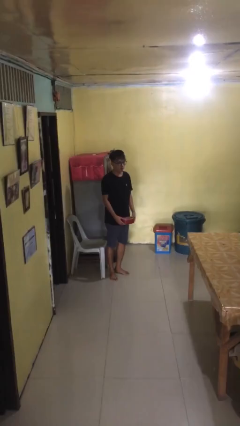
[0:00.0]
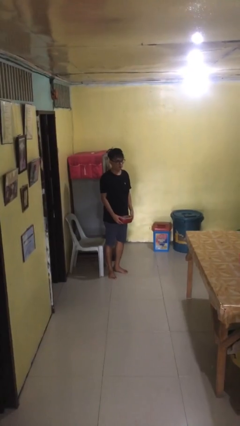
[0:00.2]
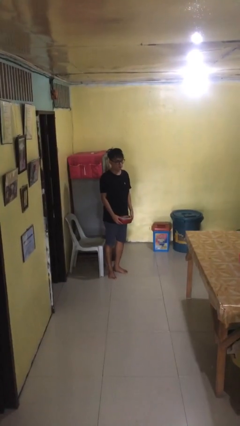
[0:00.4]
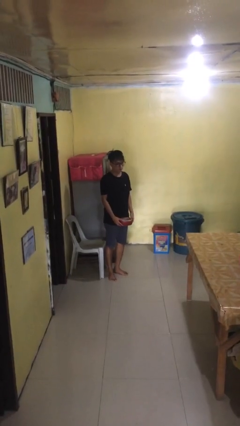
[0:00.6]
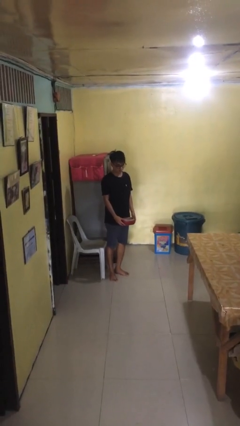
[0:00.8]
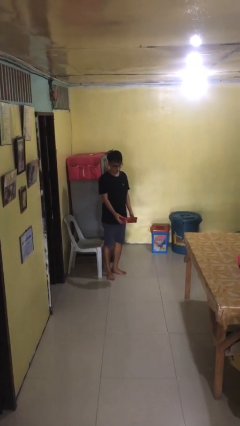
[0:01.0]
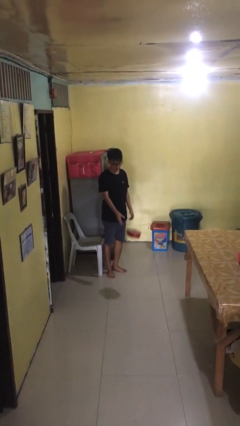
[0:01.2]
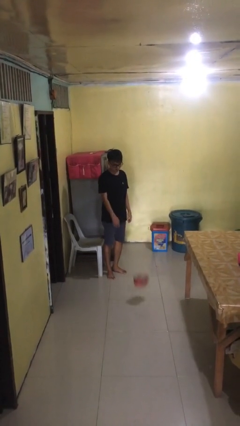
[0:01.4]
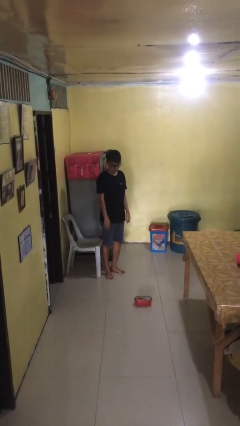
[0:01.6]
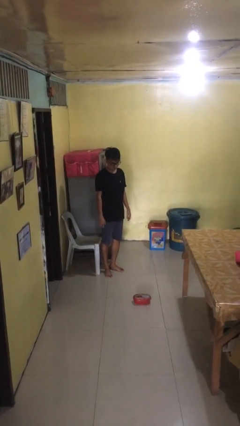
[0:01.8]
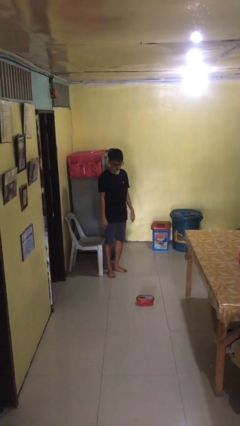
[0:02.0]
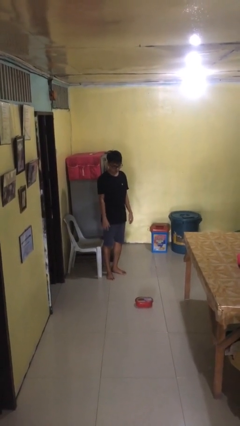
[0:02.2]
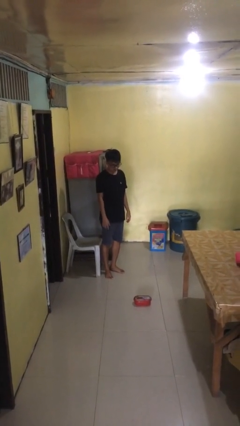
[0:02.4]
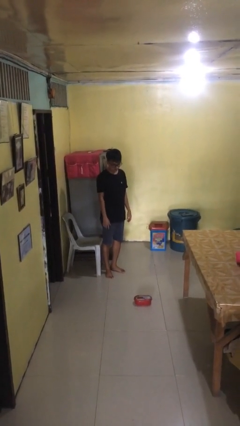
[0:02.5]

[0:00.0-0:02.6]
person throws object to ground

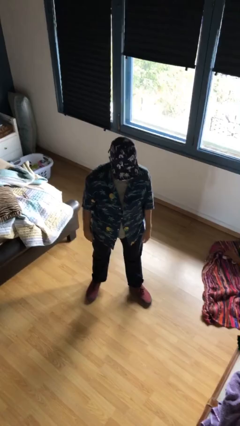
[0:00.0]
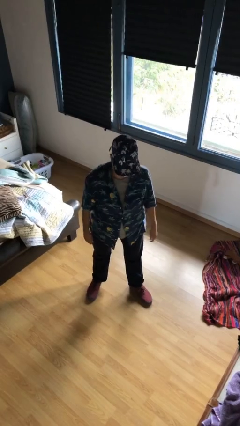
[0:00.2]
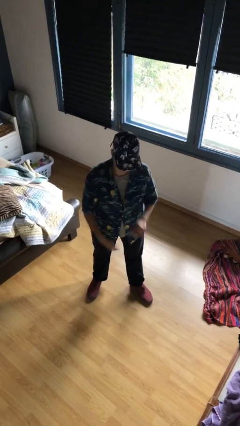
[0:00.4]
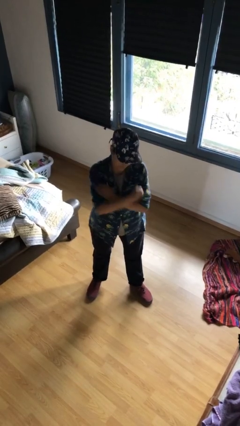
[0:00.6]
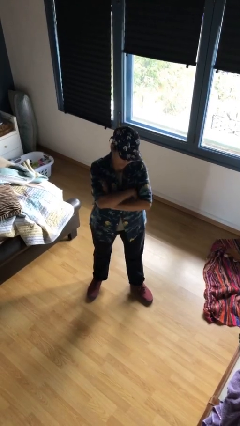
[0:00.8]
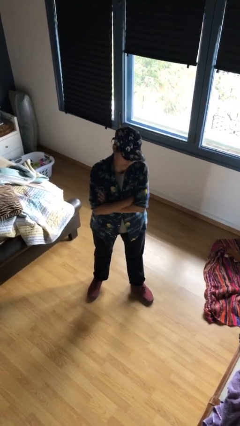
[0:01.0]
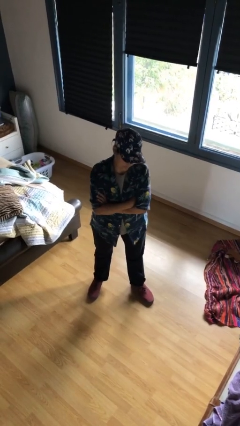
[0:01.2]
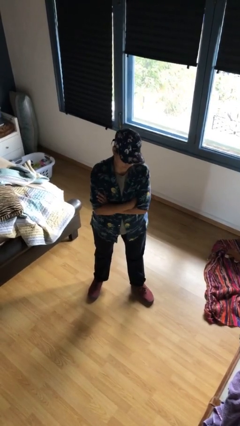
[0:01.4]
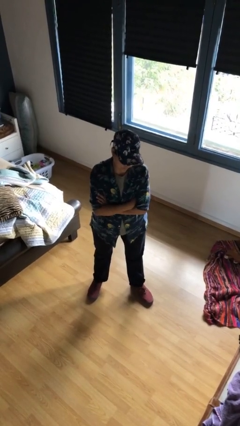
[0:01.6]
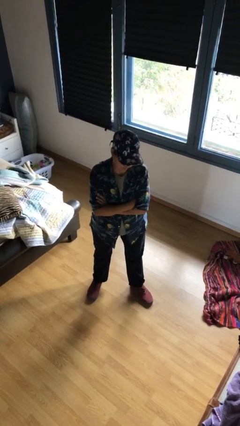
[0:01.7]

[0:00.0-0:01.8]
person crosses arms

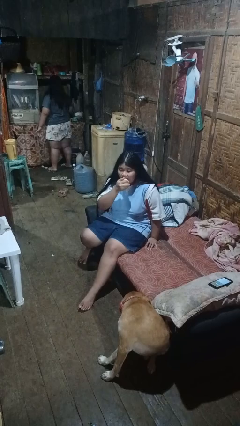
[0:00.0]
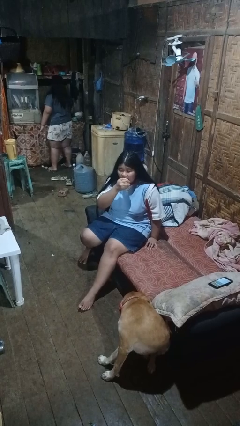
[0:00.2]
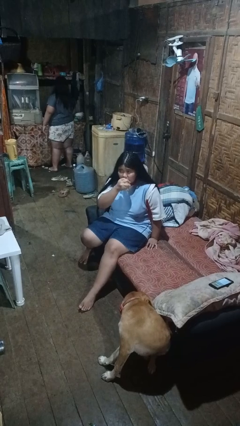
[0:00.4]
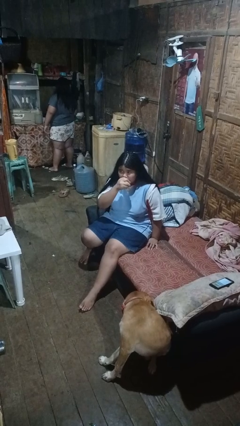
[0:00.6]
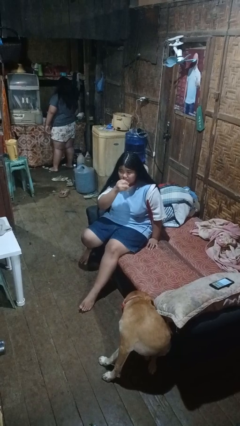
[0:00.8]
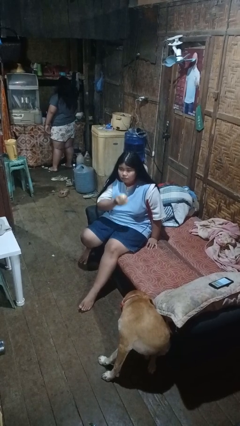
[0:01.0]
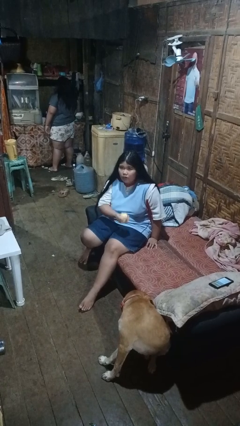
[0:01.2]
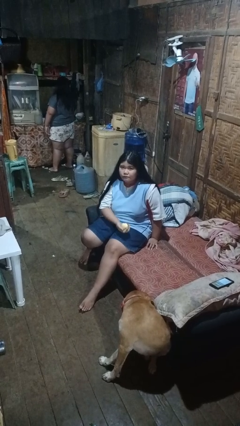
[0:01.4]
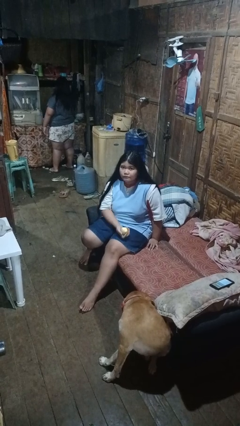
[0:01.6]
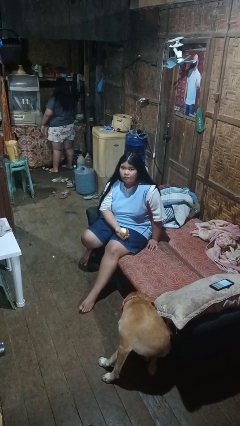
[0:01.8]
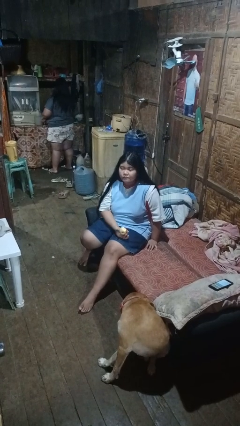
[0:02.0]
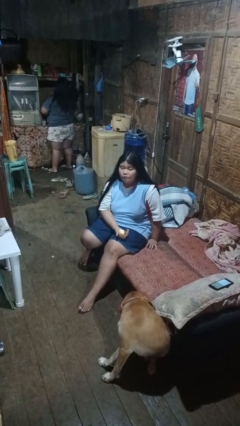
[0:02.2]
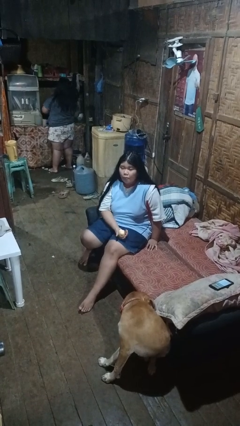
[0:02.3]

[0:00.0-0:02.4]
person eats apple

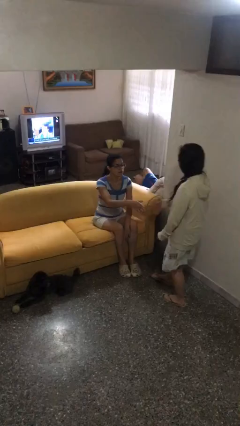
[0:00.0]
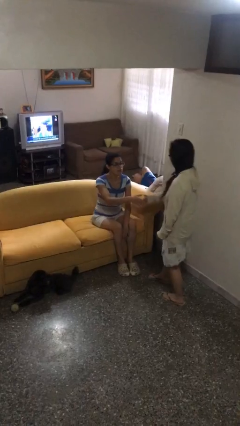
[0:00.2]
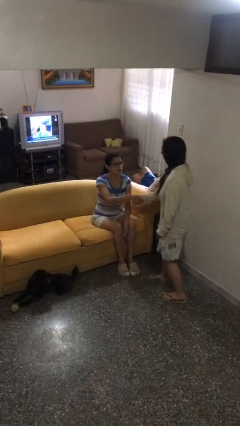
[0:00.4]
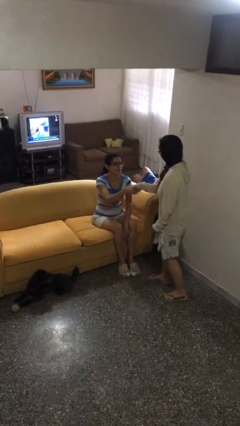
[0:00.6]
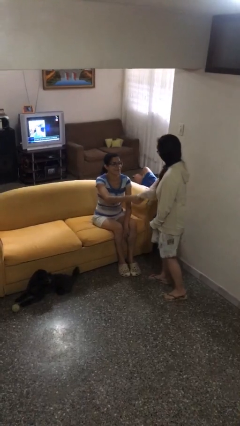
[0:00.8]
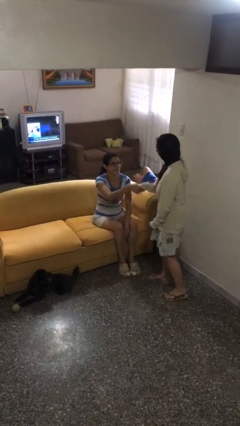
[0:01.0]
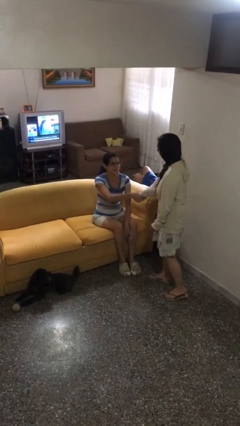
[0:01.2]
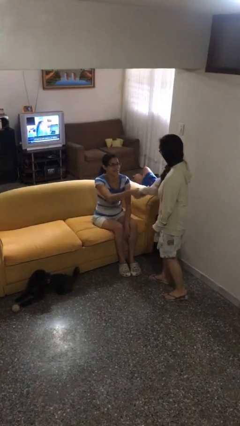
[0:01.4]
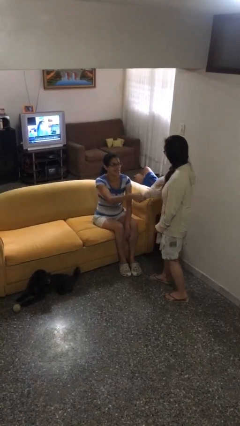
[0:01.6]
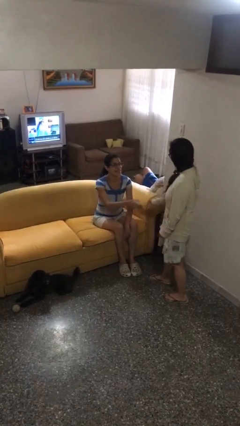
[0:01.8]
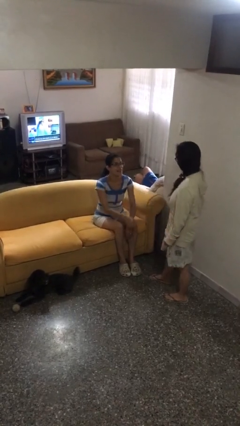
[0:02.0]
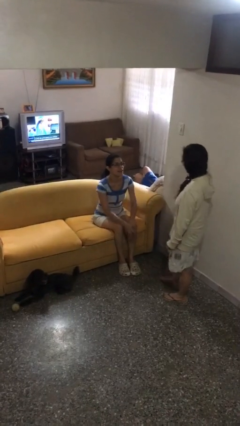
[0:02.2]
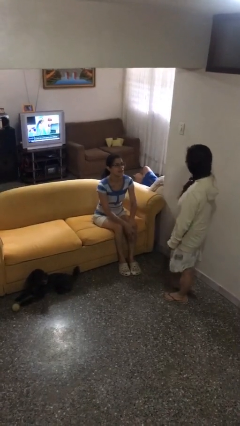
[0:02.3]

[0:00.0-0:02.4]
person shakes hand

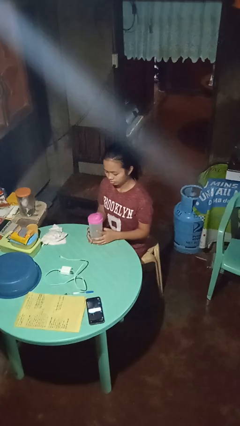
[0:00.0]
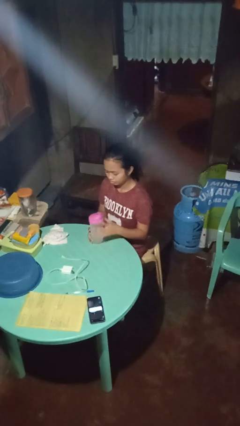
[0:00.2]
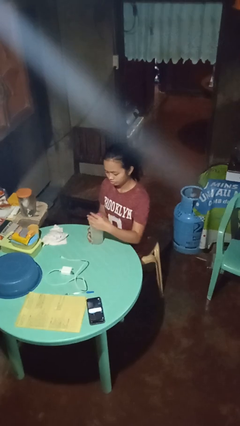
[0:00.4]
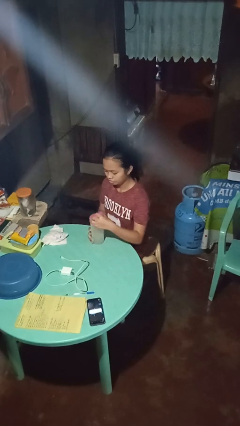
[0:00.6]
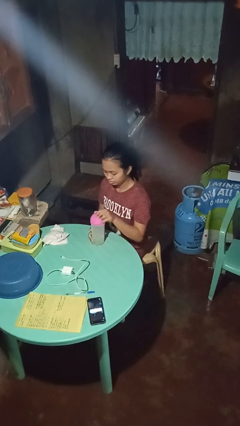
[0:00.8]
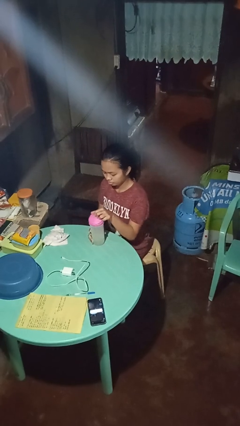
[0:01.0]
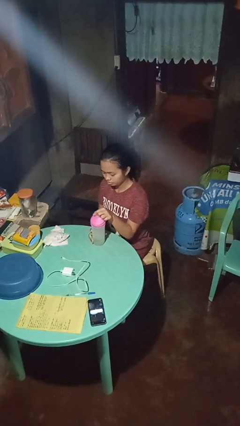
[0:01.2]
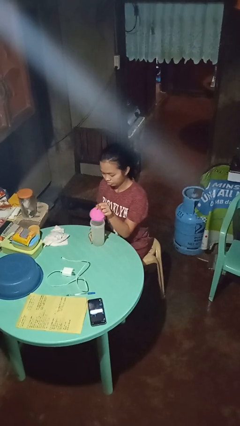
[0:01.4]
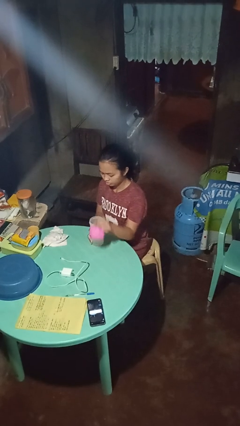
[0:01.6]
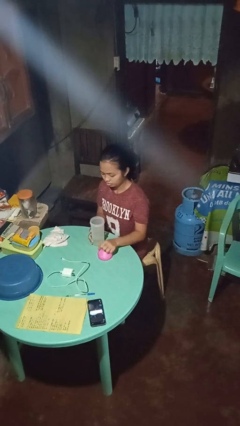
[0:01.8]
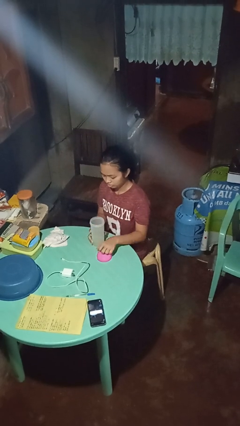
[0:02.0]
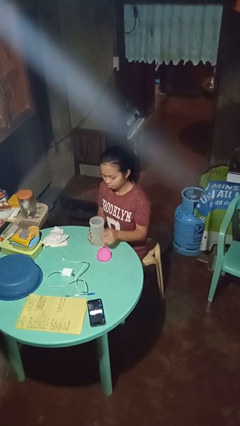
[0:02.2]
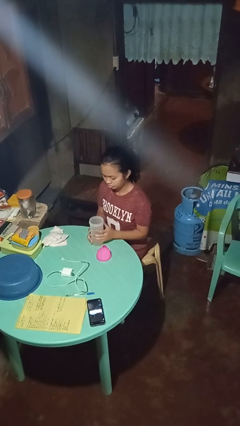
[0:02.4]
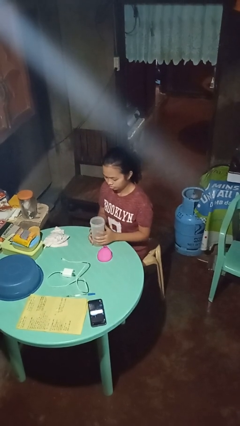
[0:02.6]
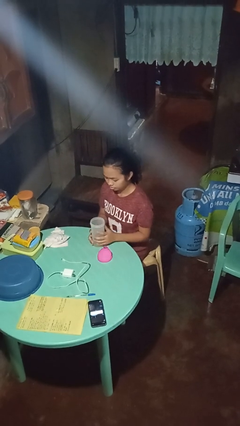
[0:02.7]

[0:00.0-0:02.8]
person unscrews lid from bottle

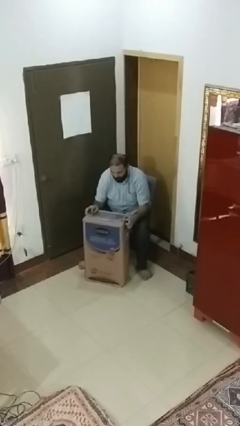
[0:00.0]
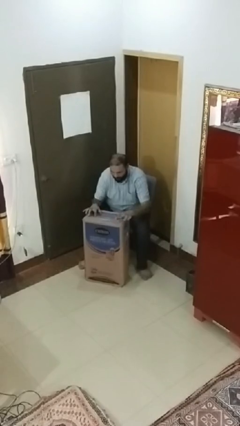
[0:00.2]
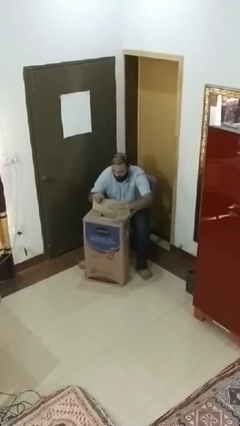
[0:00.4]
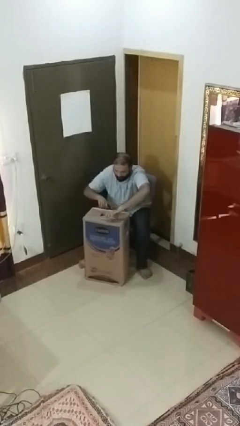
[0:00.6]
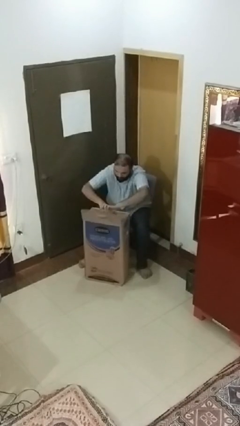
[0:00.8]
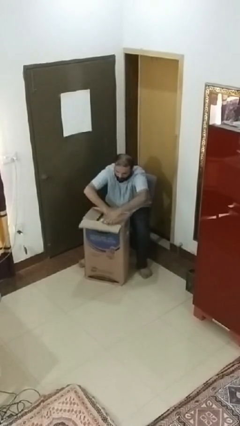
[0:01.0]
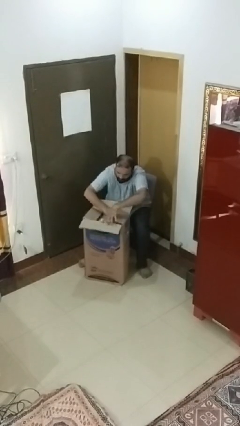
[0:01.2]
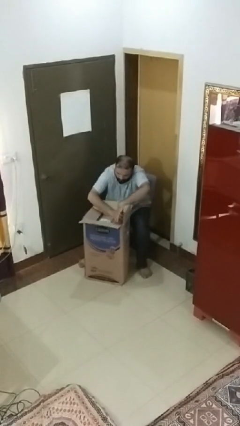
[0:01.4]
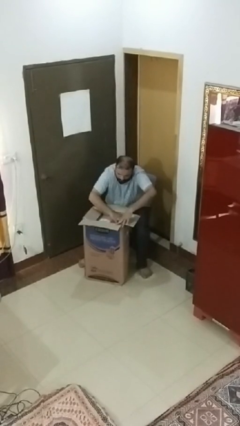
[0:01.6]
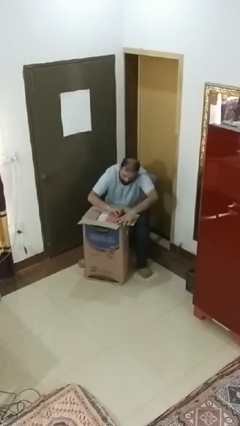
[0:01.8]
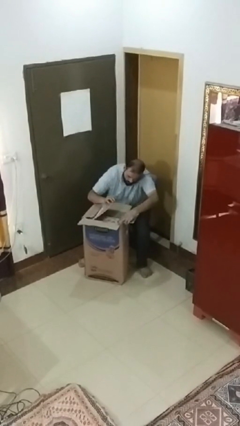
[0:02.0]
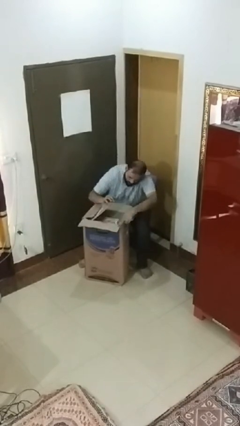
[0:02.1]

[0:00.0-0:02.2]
person searches in box

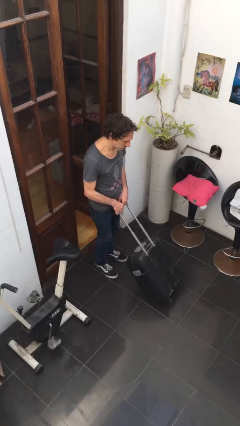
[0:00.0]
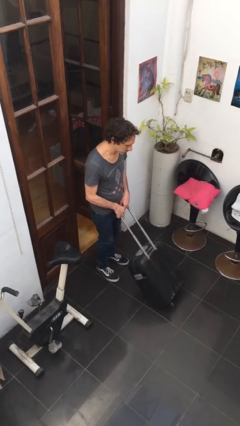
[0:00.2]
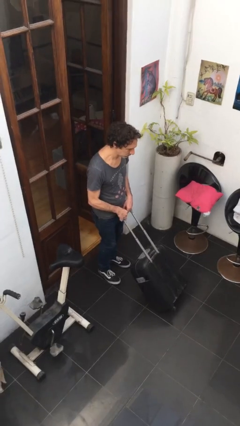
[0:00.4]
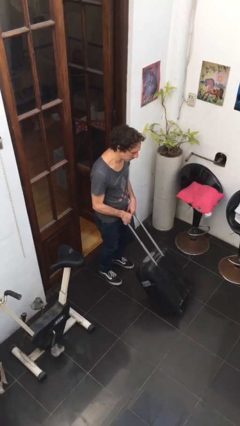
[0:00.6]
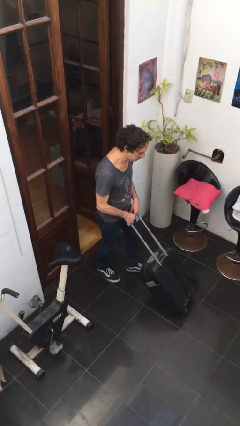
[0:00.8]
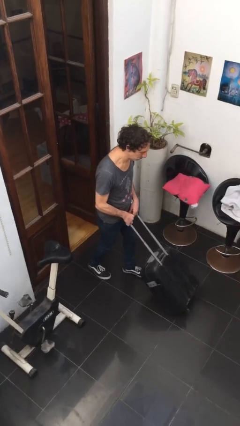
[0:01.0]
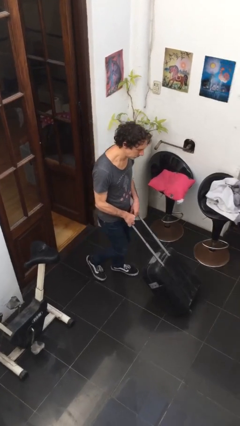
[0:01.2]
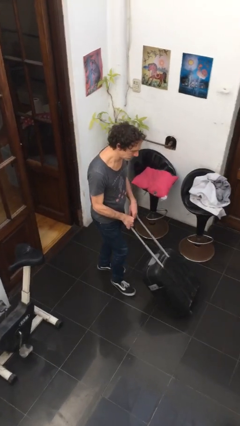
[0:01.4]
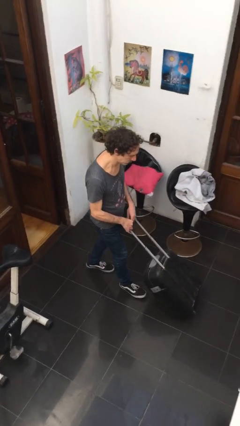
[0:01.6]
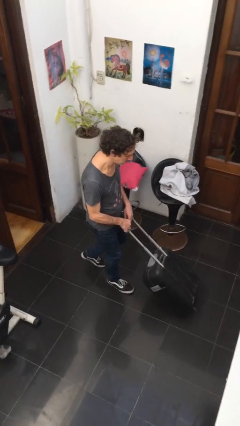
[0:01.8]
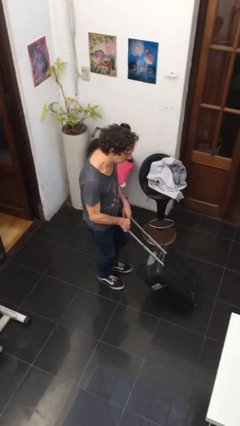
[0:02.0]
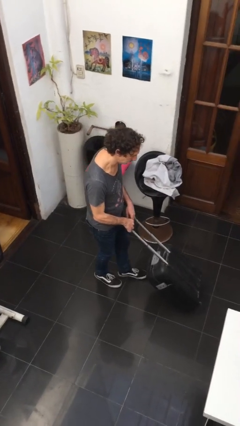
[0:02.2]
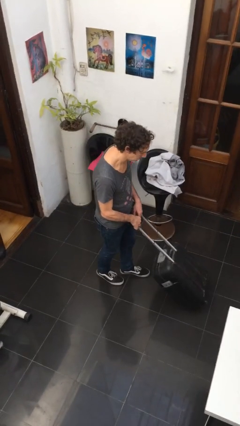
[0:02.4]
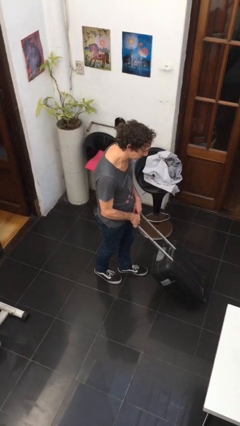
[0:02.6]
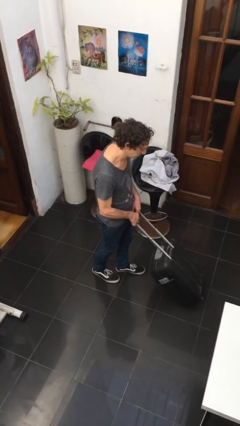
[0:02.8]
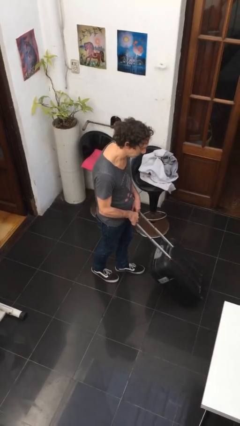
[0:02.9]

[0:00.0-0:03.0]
person pushes wheeled cart
